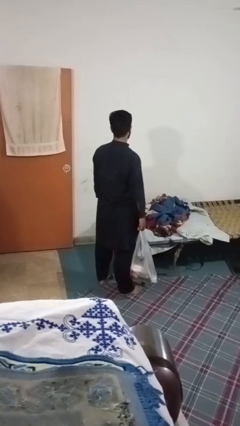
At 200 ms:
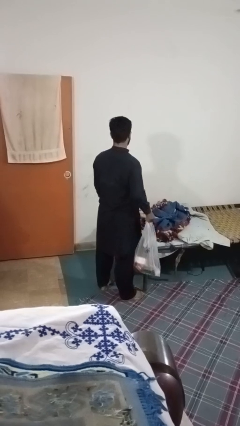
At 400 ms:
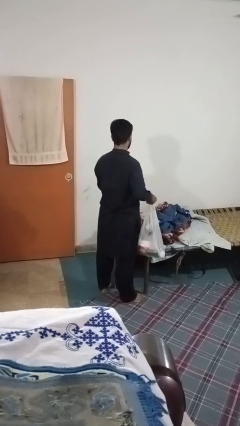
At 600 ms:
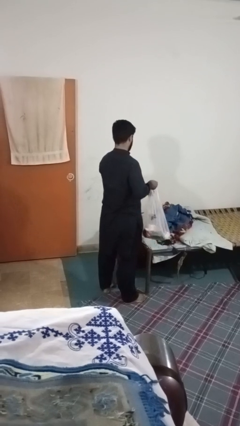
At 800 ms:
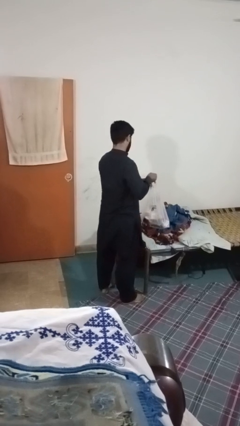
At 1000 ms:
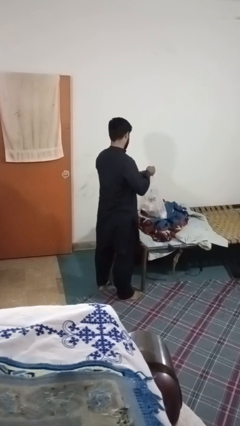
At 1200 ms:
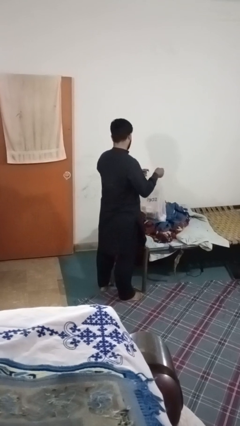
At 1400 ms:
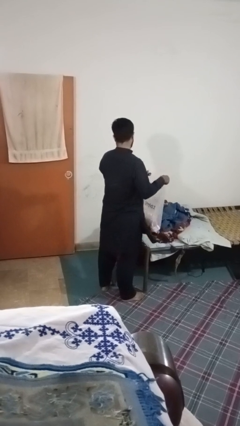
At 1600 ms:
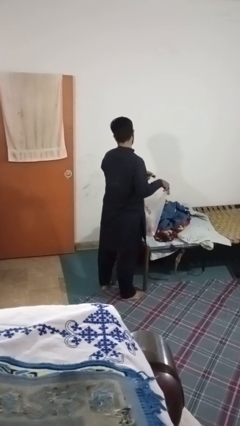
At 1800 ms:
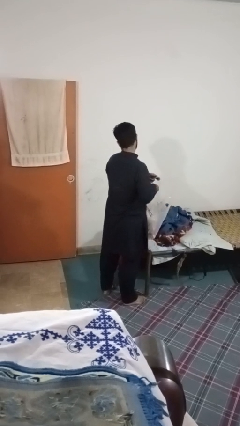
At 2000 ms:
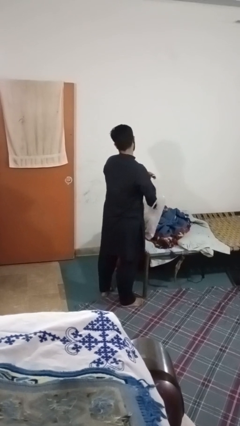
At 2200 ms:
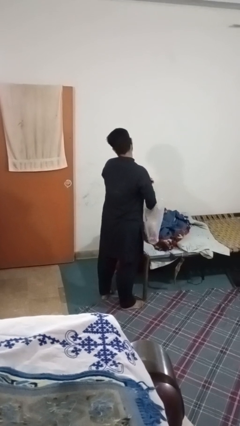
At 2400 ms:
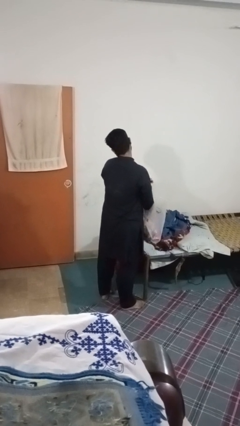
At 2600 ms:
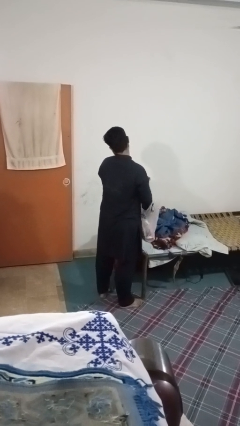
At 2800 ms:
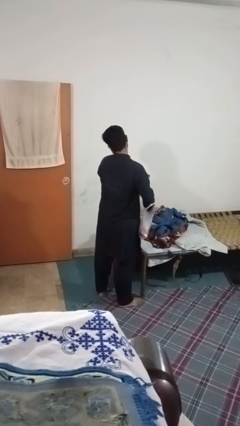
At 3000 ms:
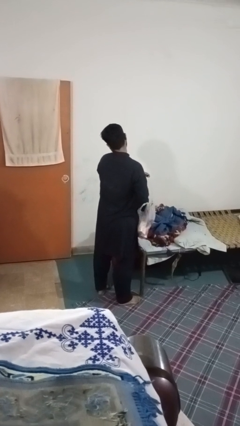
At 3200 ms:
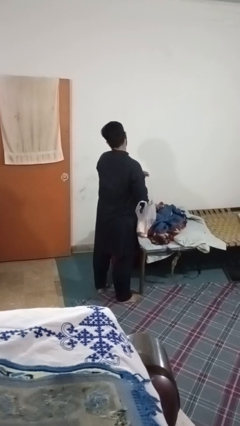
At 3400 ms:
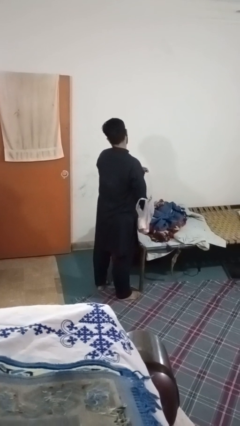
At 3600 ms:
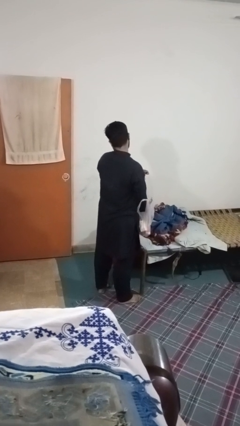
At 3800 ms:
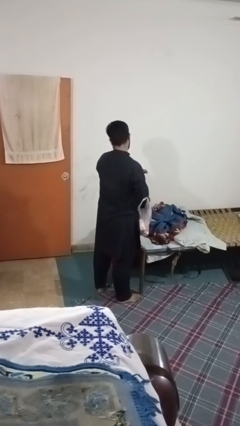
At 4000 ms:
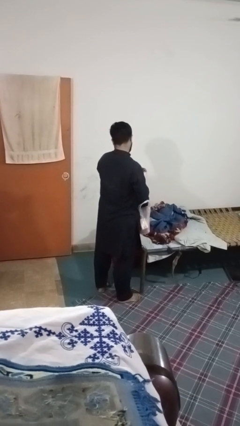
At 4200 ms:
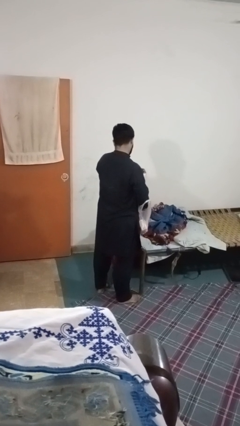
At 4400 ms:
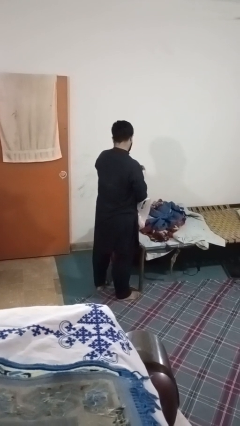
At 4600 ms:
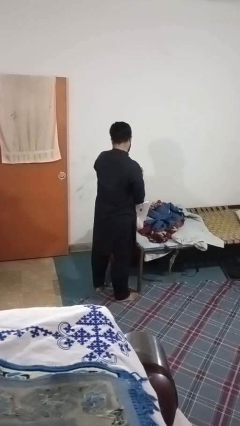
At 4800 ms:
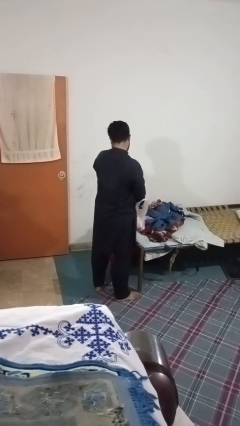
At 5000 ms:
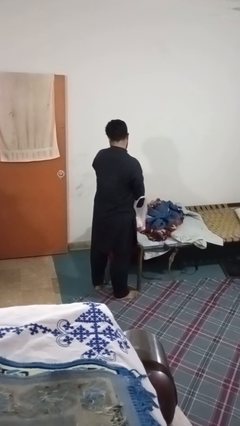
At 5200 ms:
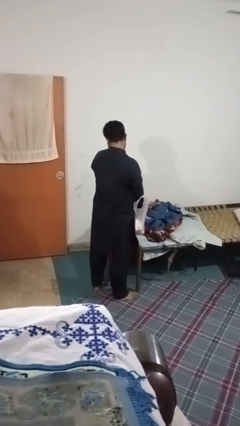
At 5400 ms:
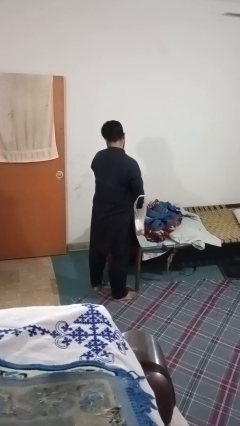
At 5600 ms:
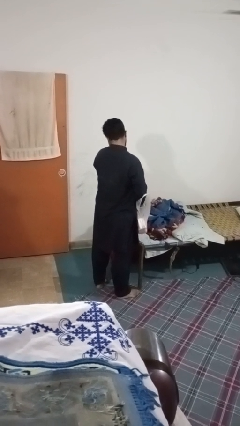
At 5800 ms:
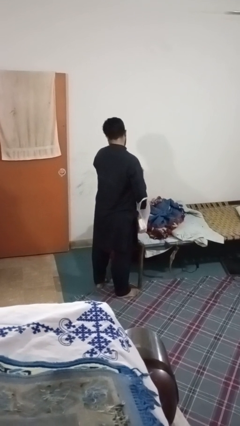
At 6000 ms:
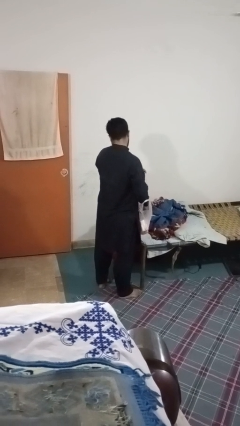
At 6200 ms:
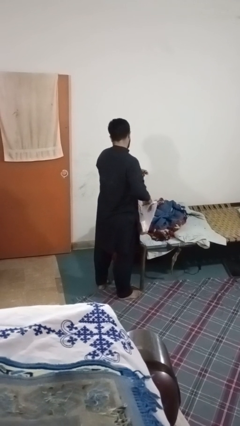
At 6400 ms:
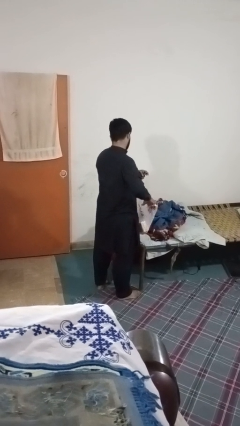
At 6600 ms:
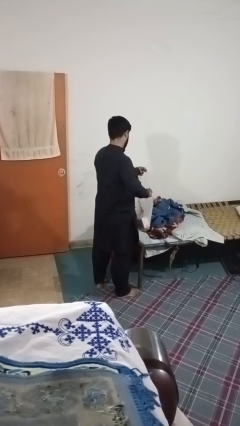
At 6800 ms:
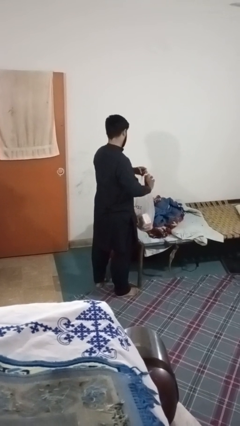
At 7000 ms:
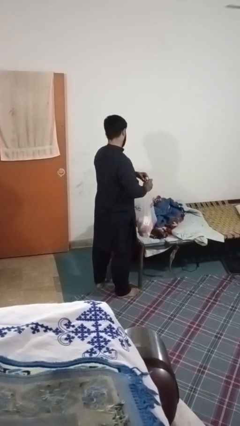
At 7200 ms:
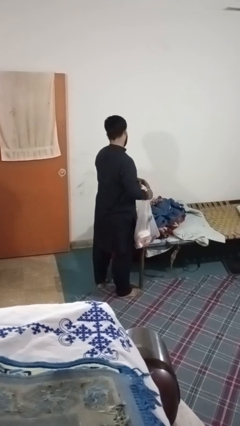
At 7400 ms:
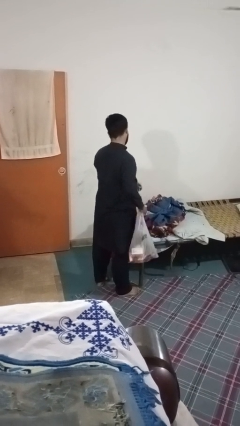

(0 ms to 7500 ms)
person searches in bag

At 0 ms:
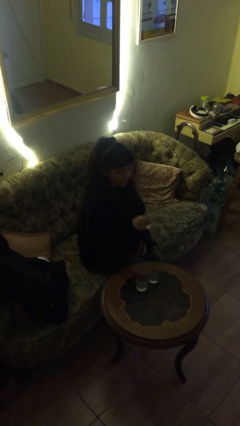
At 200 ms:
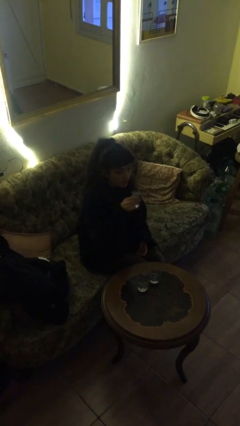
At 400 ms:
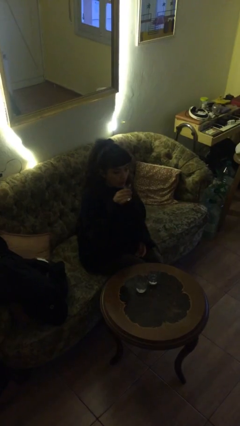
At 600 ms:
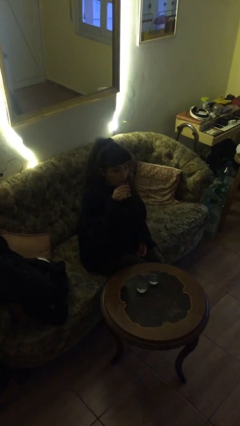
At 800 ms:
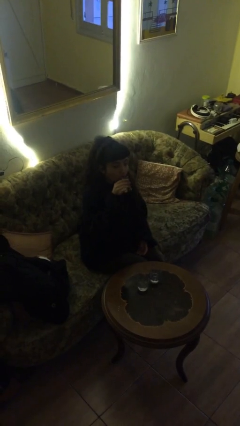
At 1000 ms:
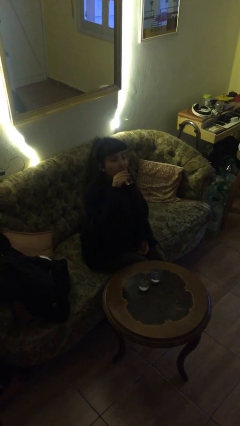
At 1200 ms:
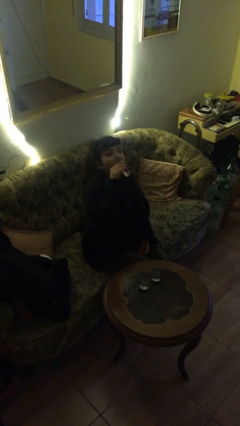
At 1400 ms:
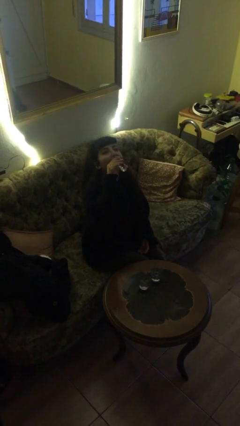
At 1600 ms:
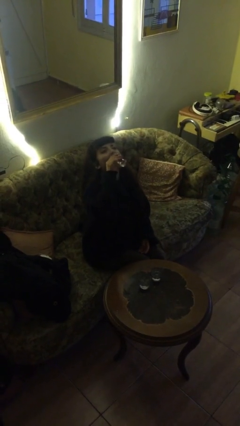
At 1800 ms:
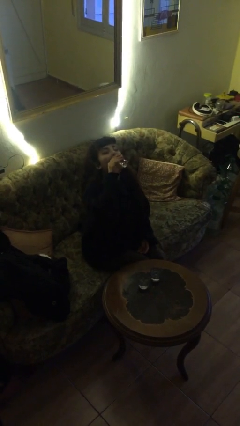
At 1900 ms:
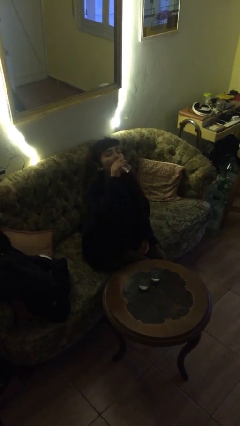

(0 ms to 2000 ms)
person drinks from shotglass

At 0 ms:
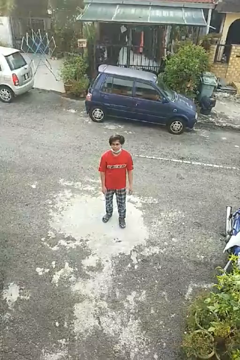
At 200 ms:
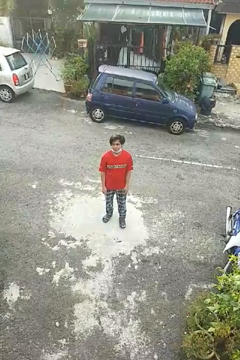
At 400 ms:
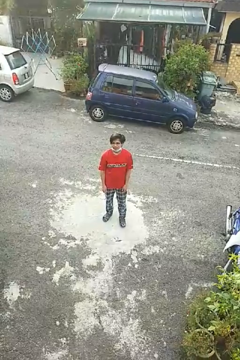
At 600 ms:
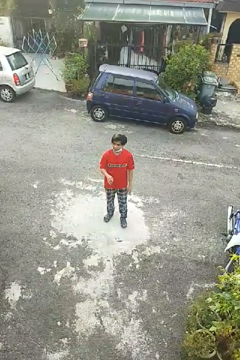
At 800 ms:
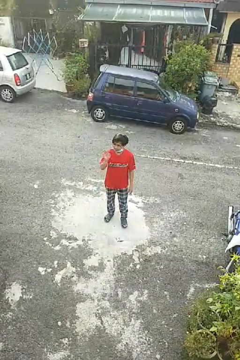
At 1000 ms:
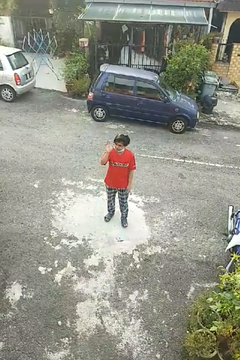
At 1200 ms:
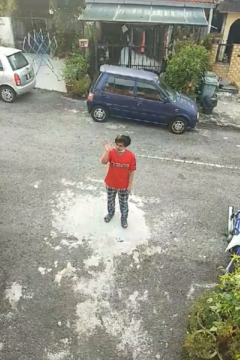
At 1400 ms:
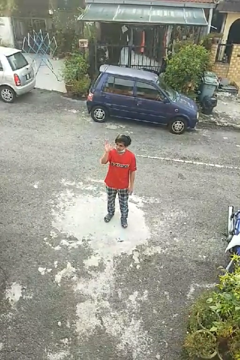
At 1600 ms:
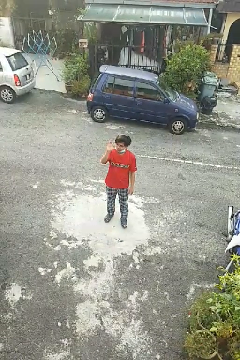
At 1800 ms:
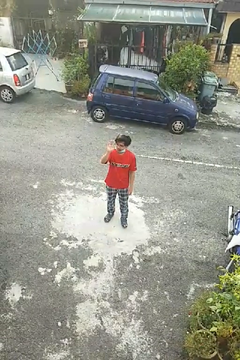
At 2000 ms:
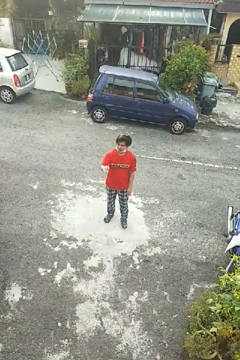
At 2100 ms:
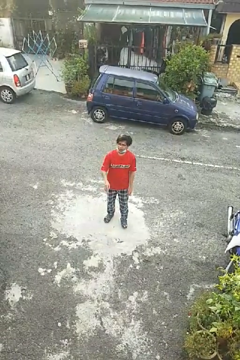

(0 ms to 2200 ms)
person waves at person

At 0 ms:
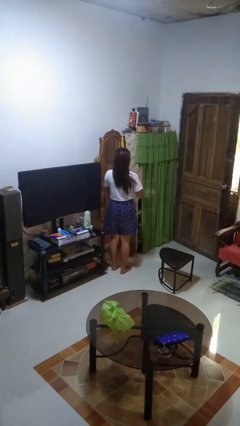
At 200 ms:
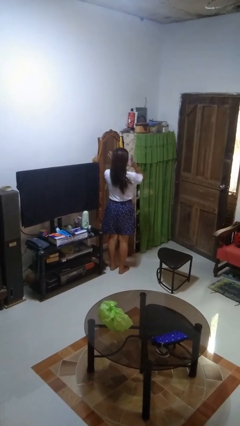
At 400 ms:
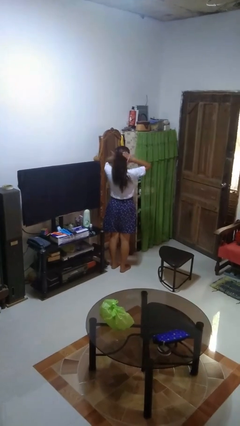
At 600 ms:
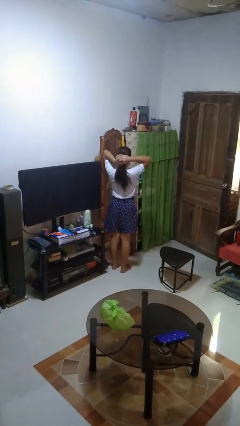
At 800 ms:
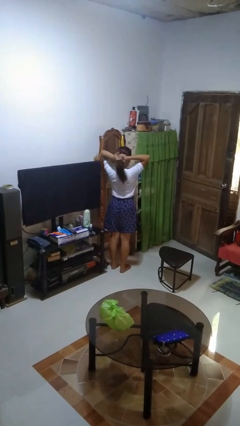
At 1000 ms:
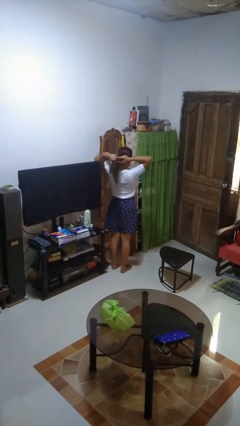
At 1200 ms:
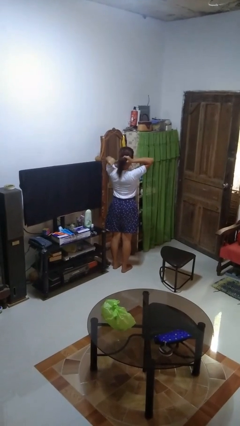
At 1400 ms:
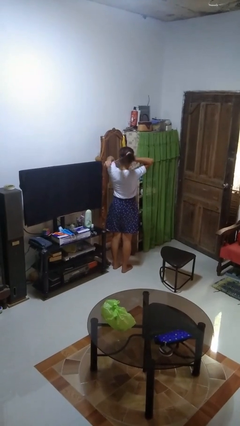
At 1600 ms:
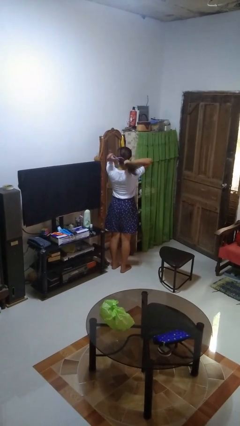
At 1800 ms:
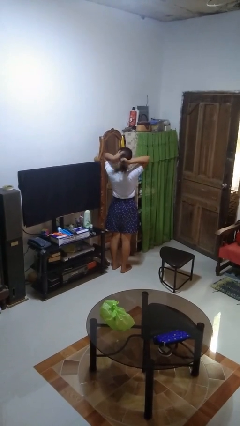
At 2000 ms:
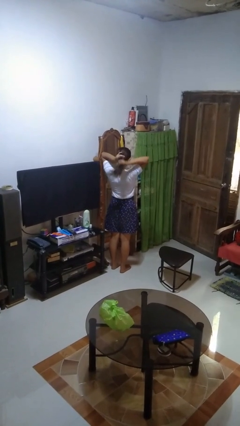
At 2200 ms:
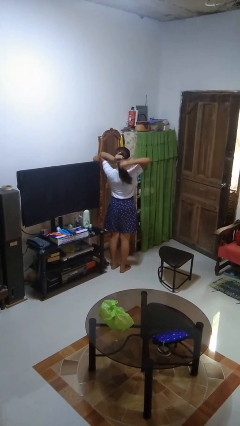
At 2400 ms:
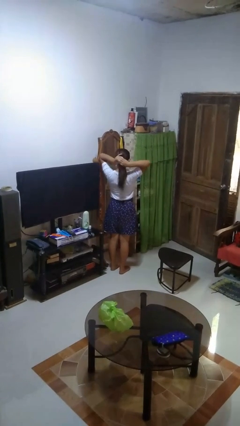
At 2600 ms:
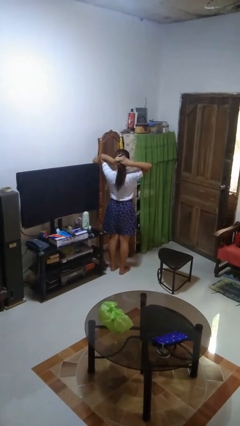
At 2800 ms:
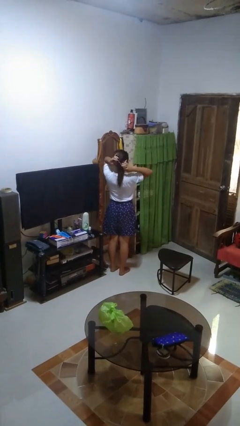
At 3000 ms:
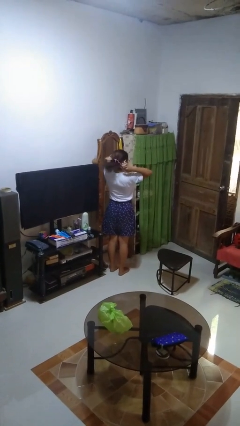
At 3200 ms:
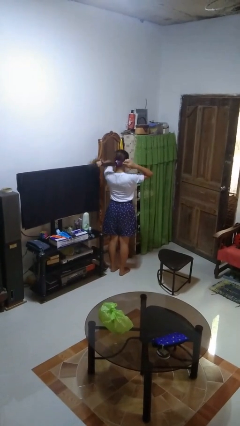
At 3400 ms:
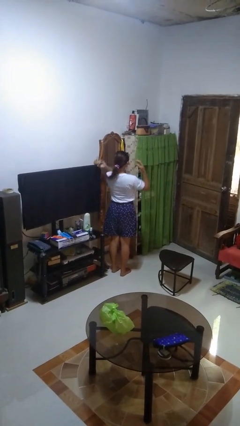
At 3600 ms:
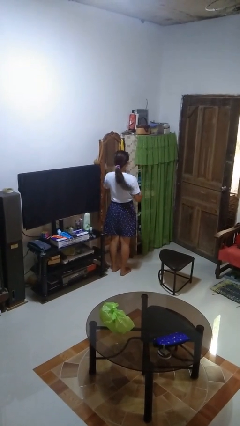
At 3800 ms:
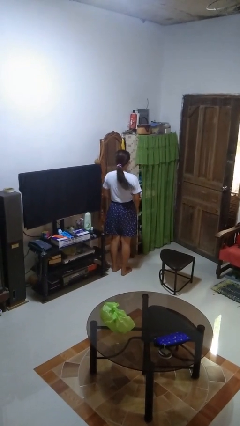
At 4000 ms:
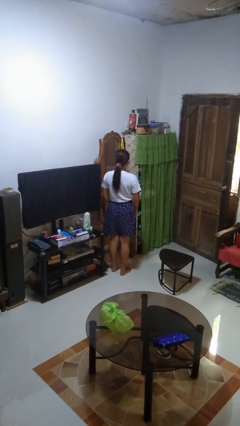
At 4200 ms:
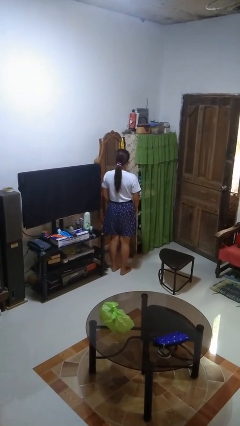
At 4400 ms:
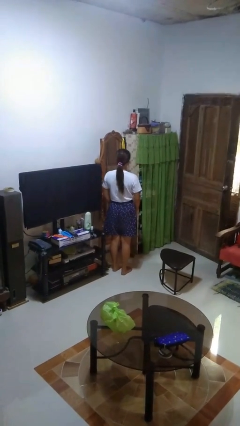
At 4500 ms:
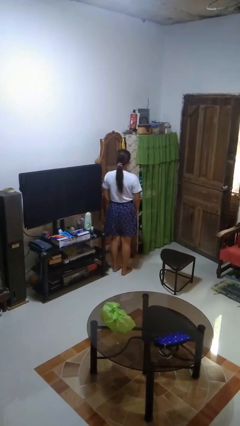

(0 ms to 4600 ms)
person puts hair in ponytail

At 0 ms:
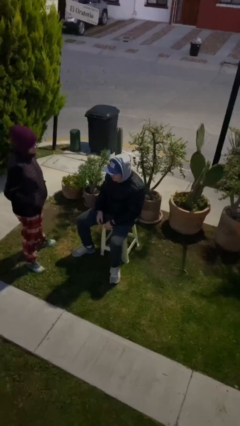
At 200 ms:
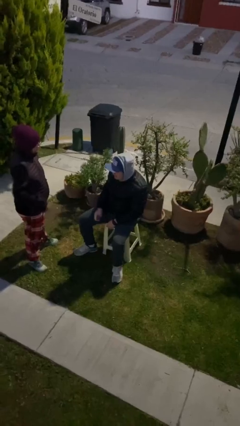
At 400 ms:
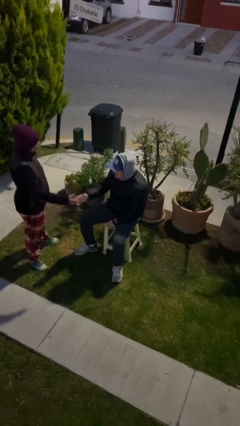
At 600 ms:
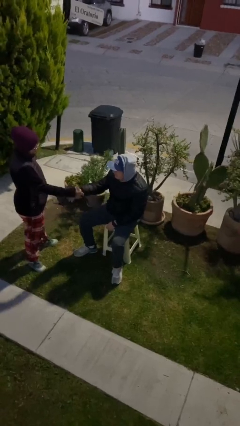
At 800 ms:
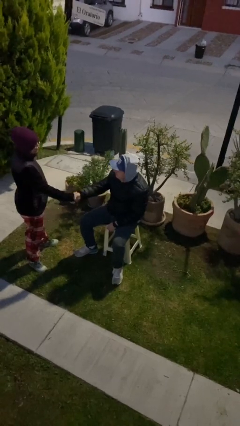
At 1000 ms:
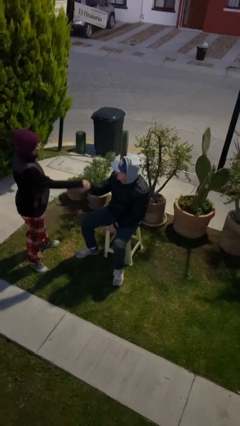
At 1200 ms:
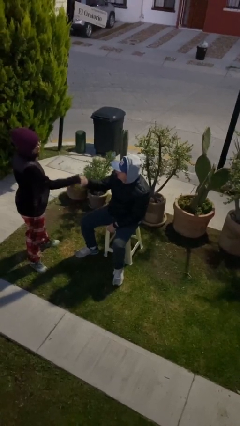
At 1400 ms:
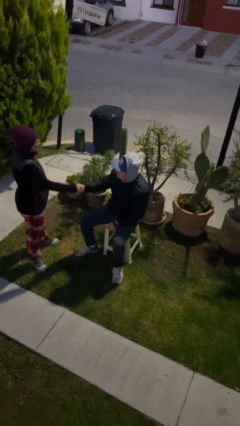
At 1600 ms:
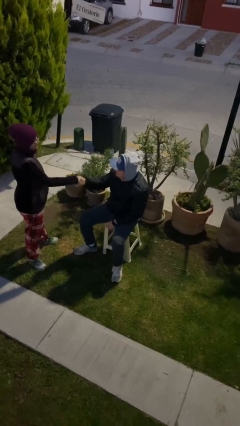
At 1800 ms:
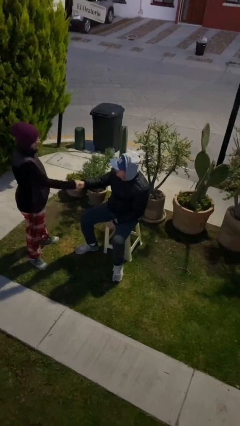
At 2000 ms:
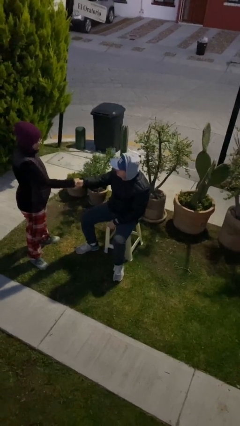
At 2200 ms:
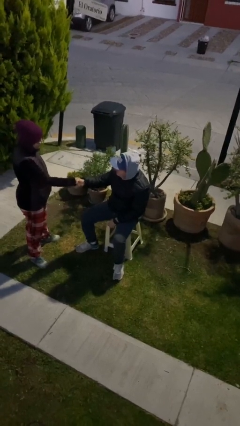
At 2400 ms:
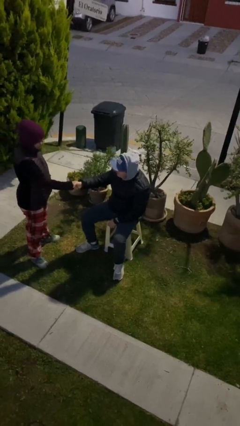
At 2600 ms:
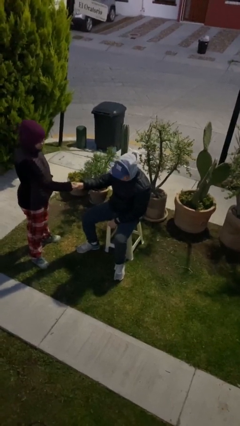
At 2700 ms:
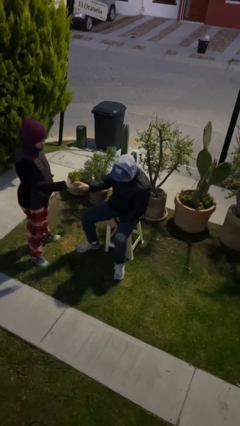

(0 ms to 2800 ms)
person shakes hand
